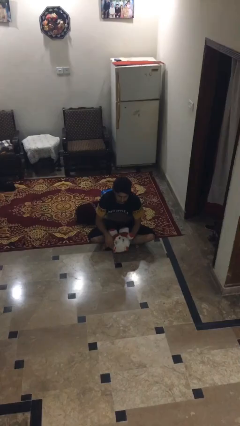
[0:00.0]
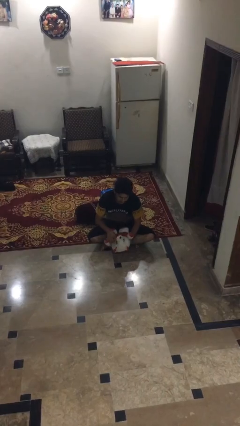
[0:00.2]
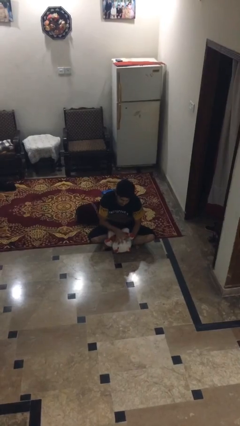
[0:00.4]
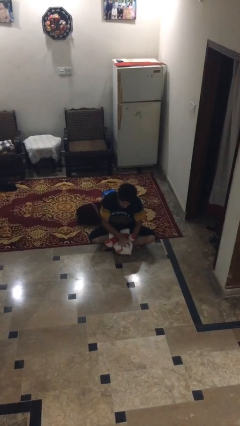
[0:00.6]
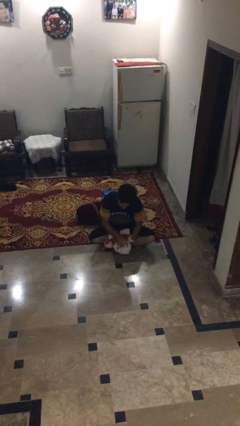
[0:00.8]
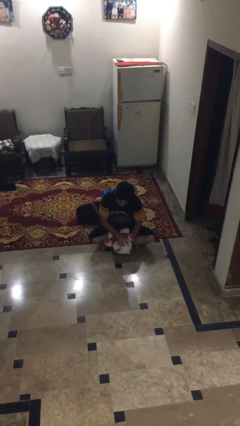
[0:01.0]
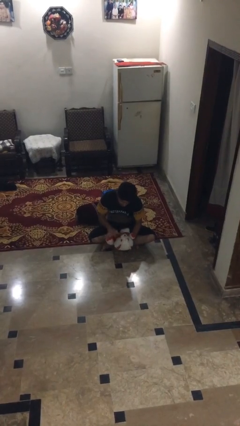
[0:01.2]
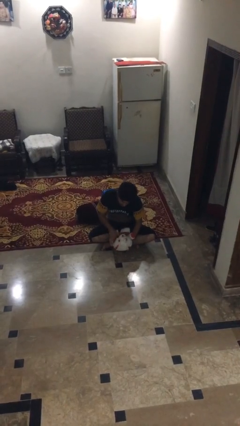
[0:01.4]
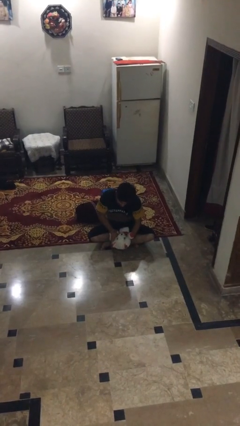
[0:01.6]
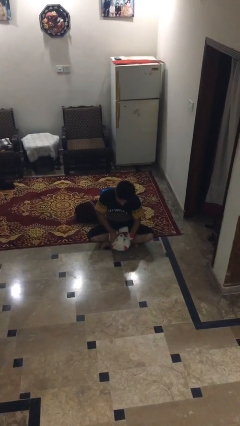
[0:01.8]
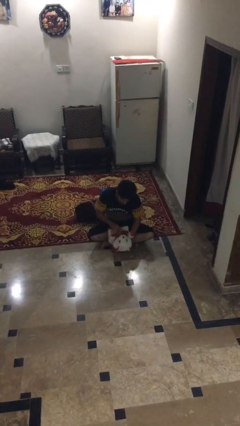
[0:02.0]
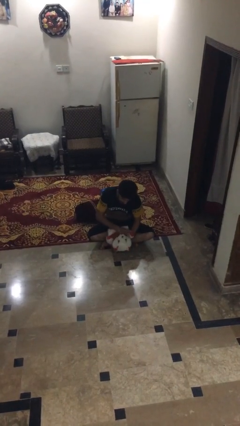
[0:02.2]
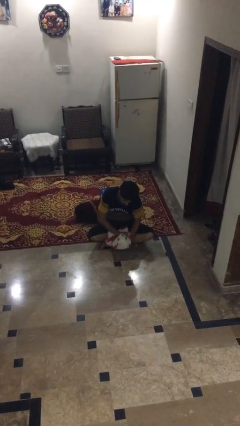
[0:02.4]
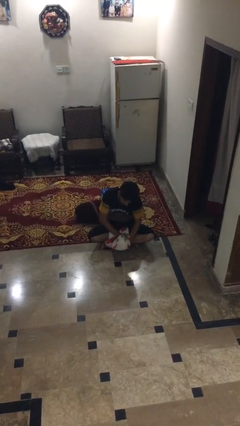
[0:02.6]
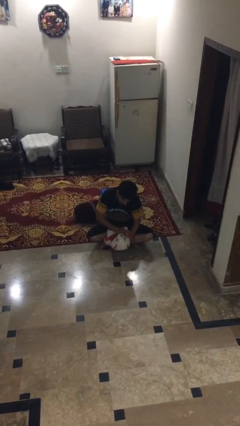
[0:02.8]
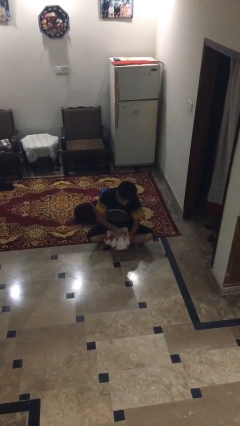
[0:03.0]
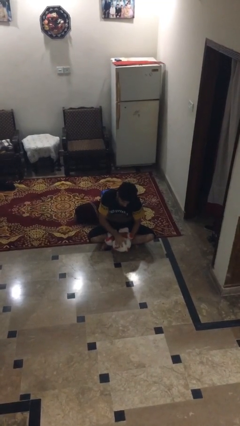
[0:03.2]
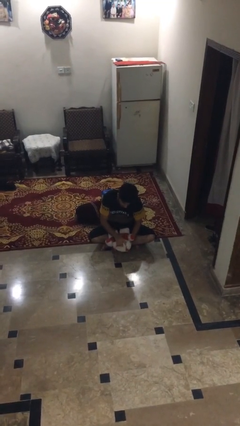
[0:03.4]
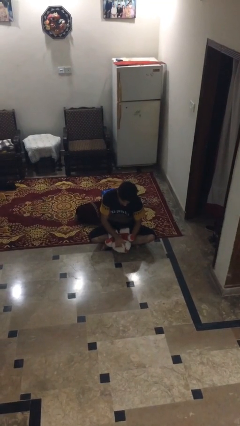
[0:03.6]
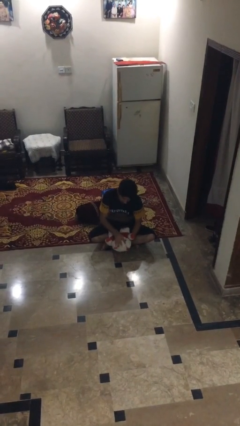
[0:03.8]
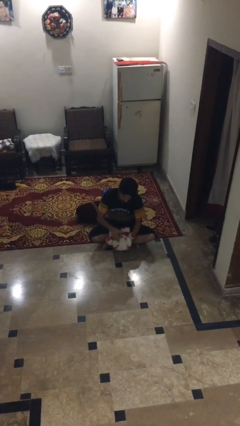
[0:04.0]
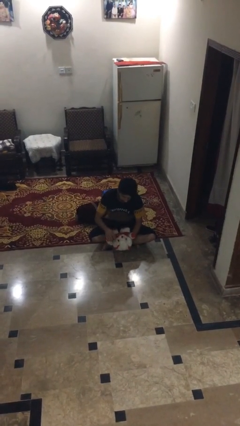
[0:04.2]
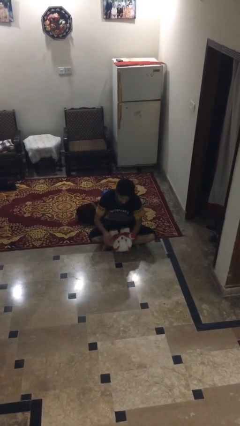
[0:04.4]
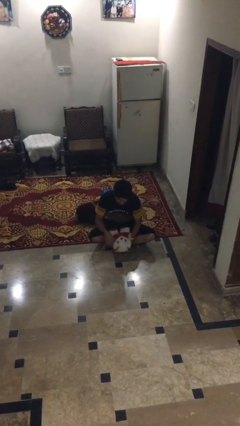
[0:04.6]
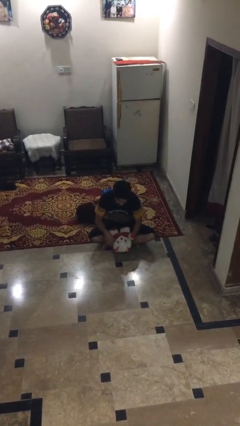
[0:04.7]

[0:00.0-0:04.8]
person squeezes object

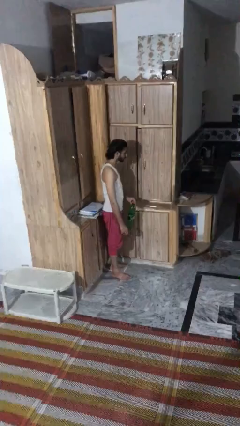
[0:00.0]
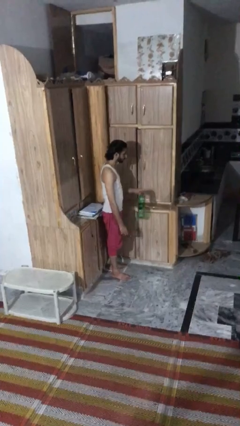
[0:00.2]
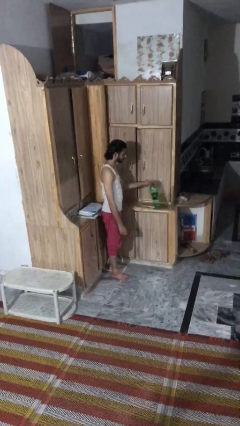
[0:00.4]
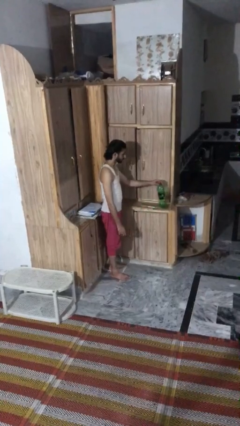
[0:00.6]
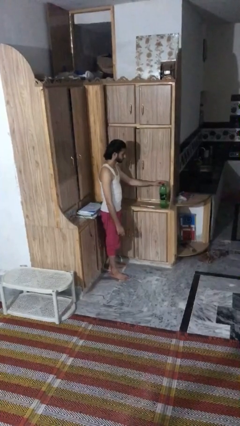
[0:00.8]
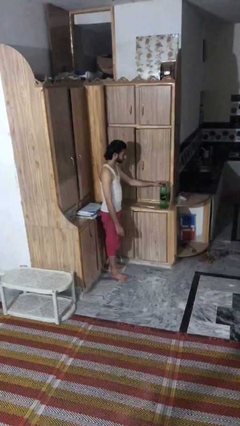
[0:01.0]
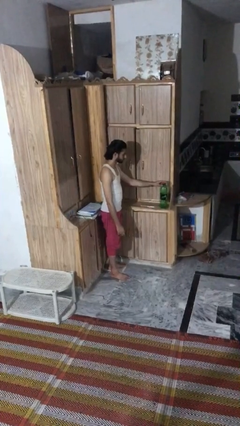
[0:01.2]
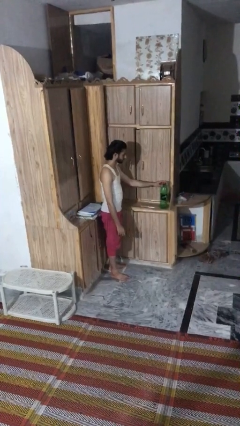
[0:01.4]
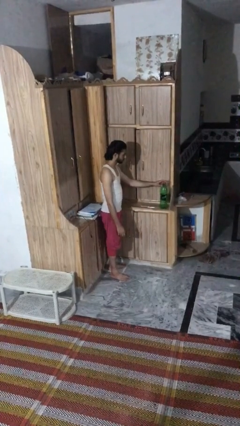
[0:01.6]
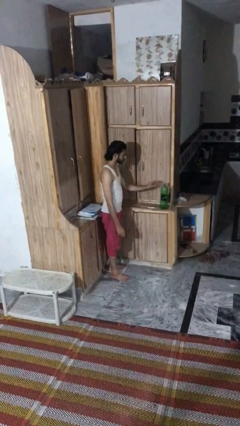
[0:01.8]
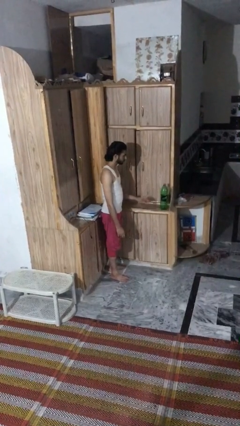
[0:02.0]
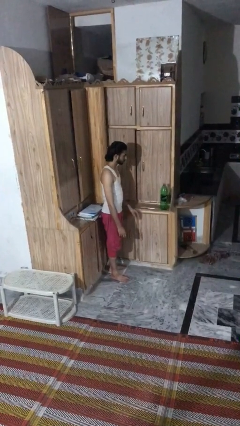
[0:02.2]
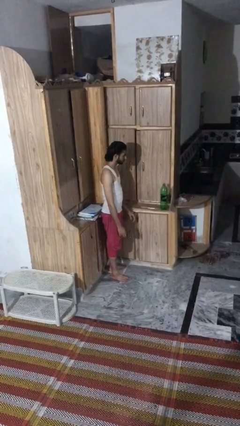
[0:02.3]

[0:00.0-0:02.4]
person puts down object on countertop

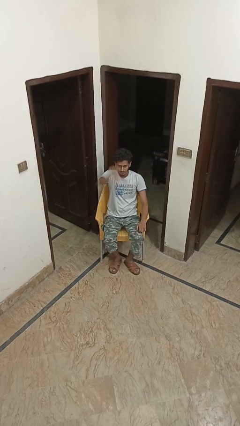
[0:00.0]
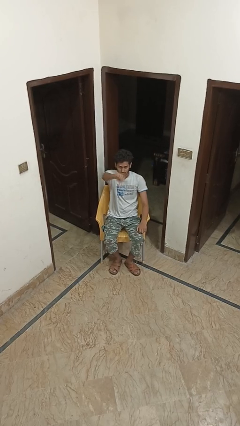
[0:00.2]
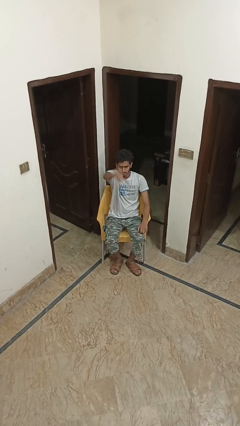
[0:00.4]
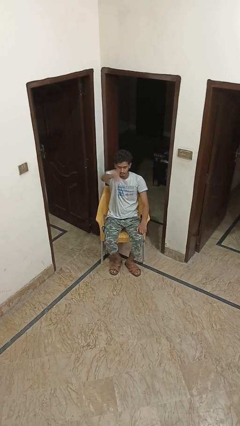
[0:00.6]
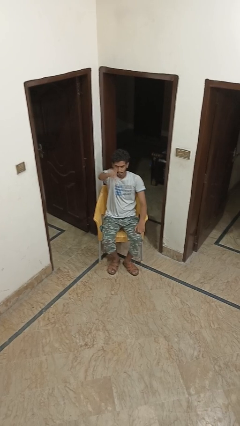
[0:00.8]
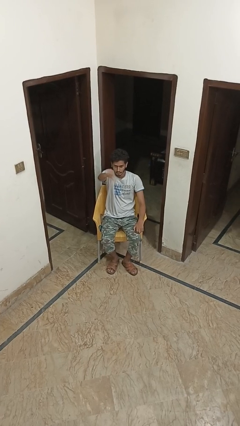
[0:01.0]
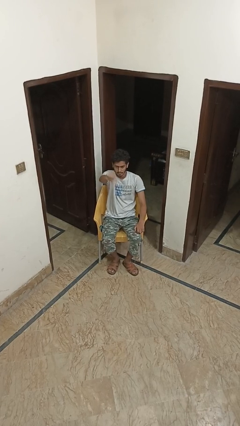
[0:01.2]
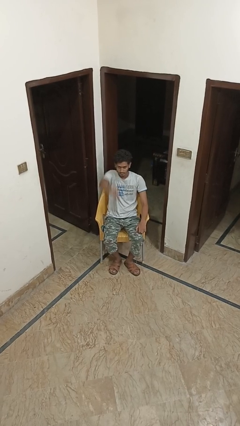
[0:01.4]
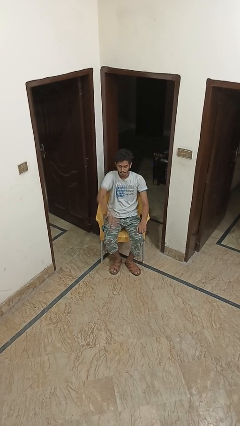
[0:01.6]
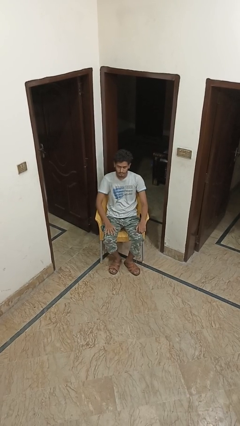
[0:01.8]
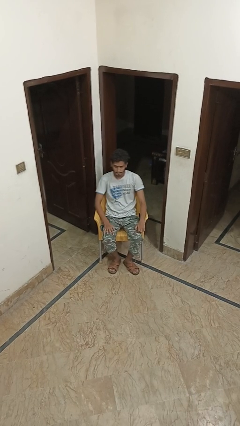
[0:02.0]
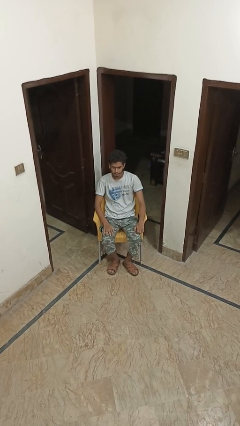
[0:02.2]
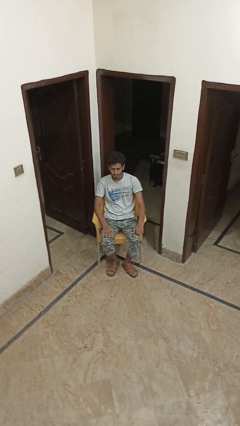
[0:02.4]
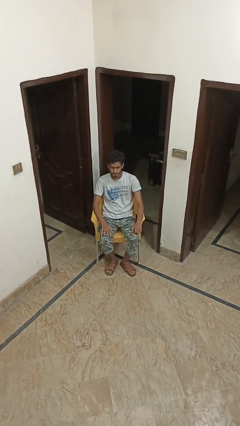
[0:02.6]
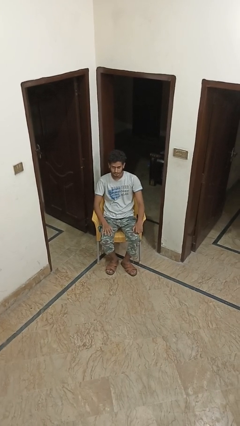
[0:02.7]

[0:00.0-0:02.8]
person gestures thumbs down

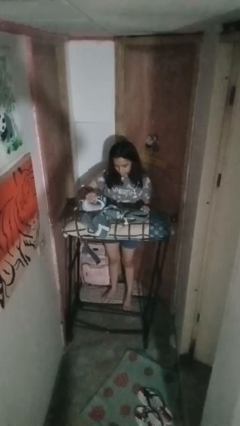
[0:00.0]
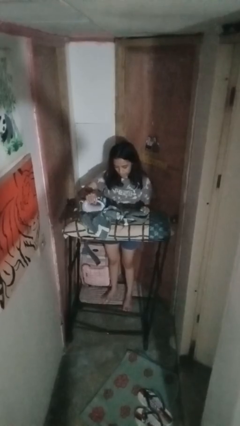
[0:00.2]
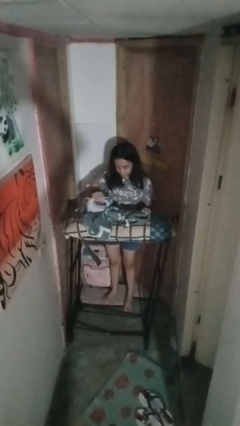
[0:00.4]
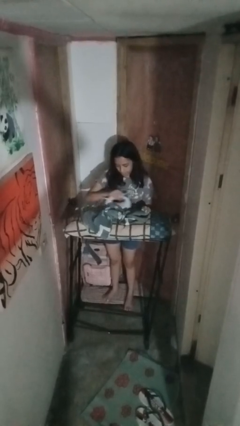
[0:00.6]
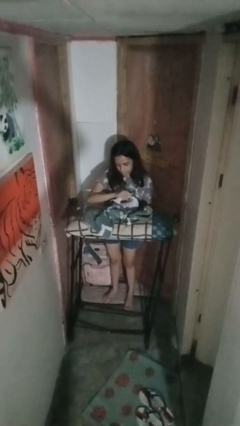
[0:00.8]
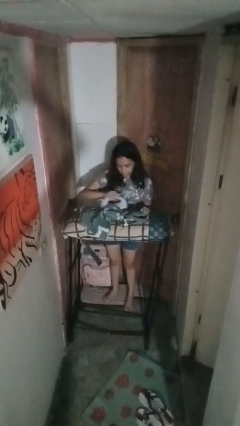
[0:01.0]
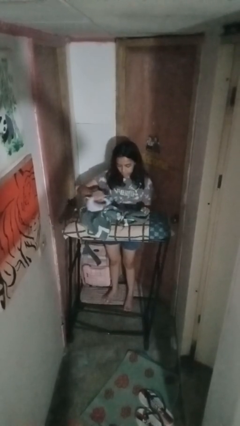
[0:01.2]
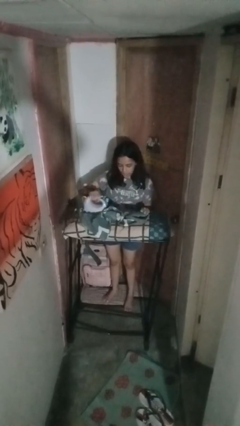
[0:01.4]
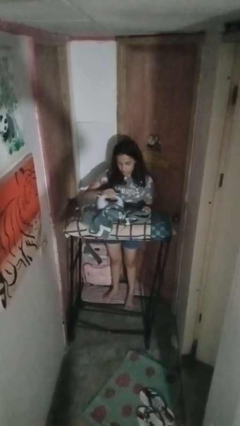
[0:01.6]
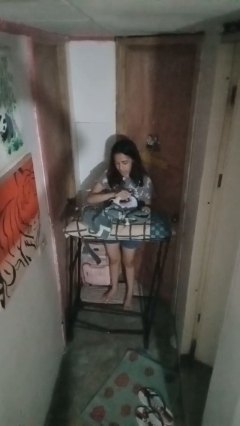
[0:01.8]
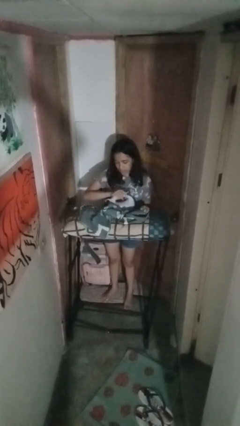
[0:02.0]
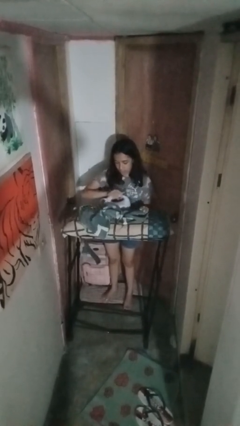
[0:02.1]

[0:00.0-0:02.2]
person irons clothes

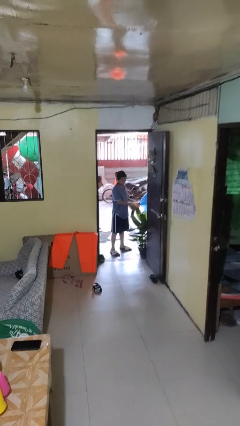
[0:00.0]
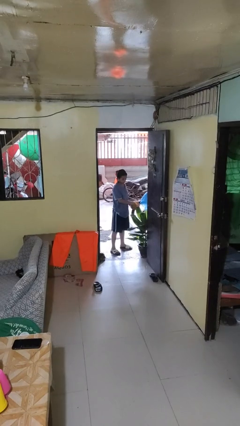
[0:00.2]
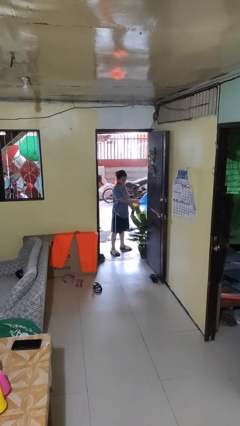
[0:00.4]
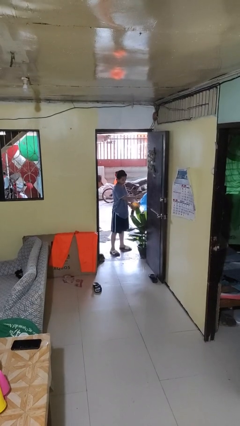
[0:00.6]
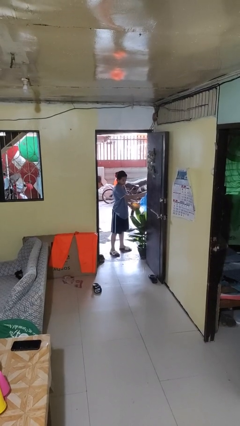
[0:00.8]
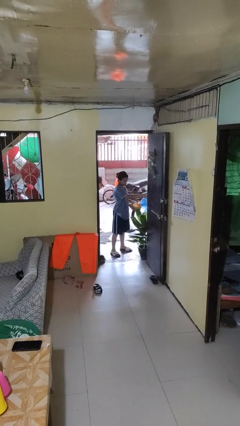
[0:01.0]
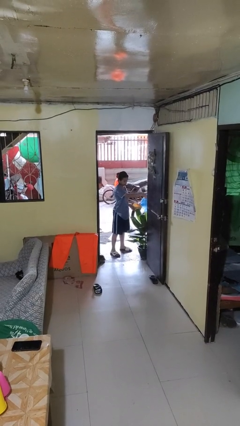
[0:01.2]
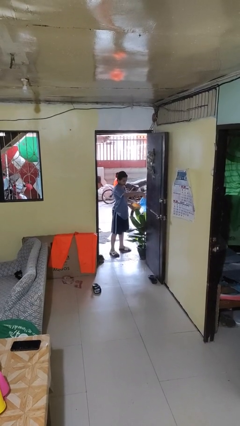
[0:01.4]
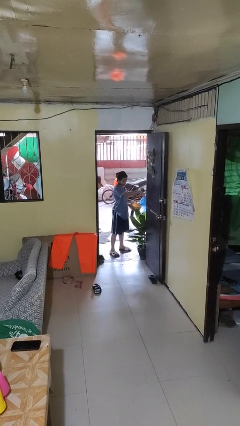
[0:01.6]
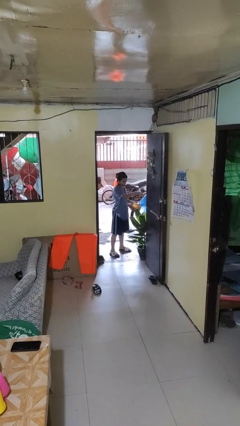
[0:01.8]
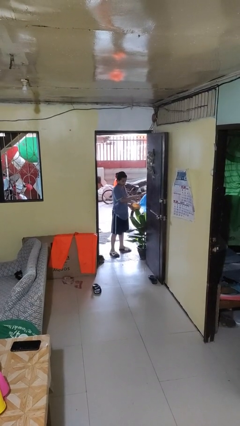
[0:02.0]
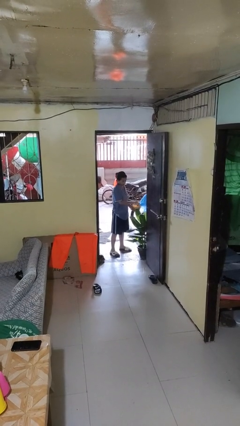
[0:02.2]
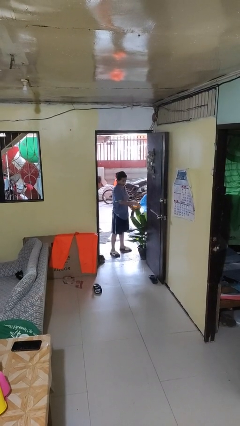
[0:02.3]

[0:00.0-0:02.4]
person waters houseplant

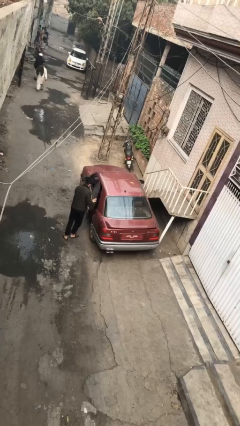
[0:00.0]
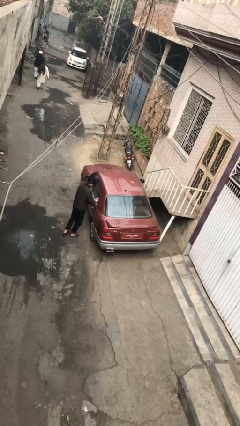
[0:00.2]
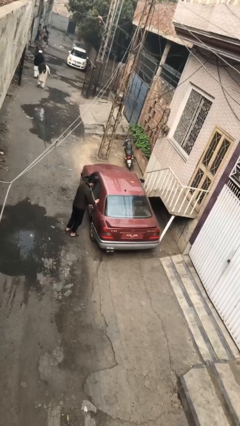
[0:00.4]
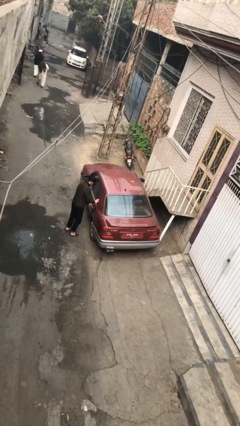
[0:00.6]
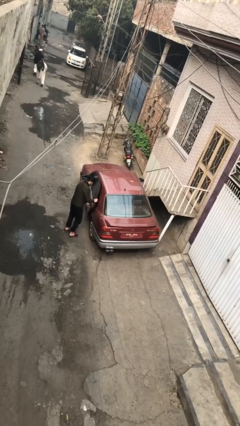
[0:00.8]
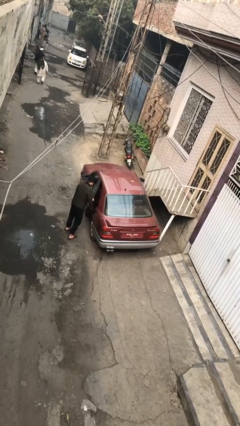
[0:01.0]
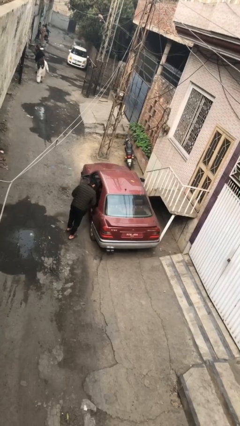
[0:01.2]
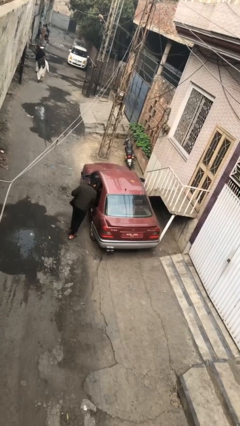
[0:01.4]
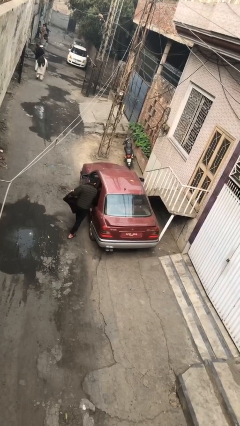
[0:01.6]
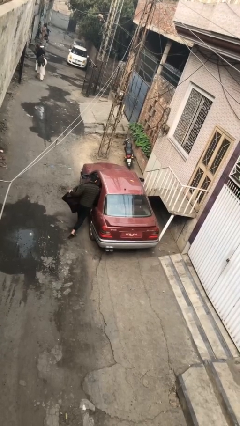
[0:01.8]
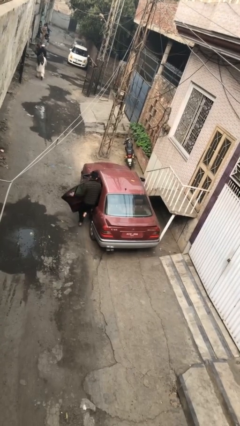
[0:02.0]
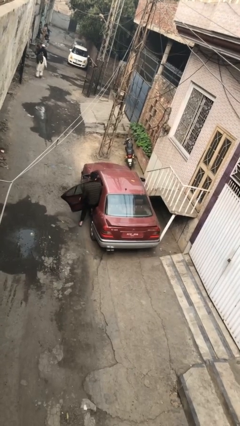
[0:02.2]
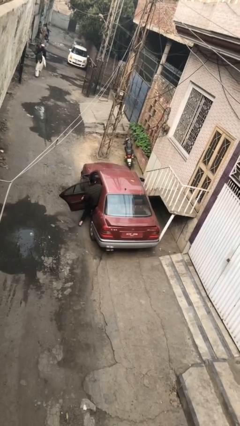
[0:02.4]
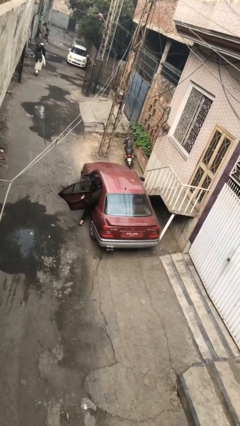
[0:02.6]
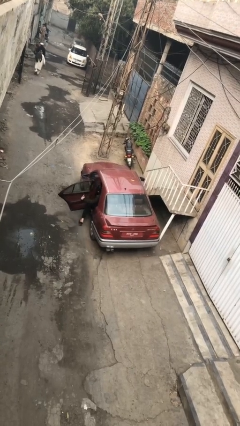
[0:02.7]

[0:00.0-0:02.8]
car picks up person
